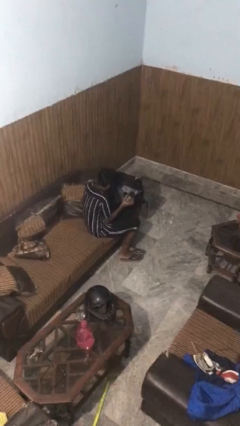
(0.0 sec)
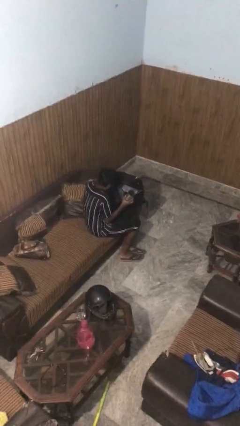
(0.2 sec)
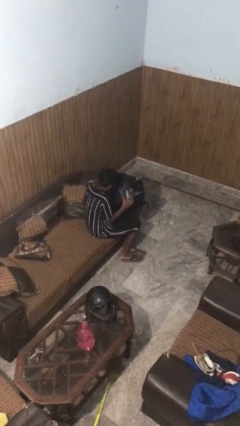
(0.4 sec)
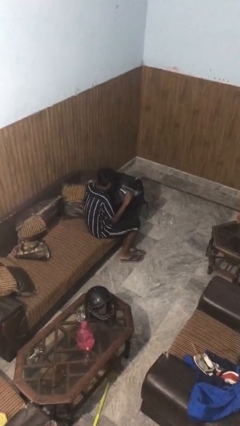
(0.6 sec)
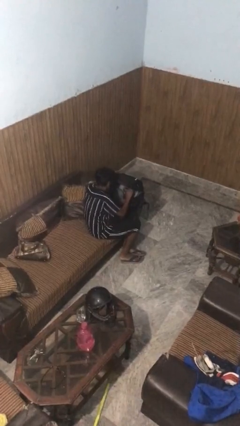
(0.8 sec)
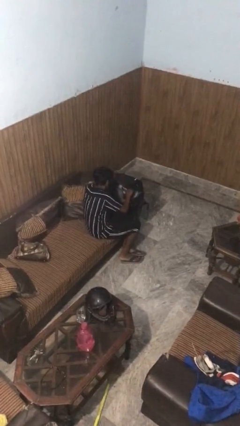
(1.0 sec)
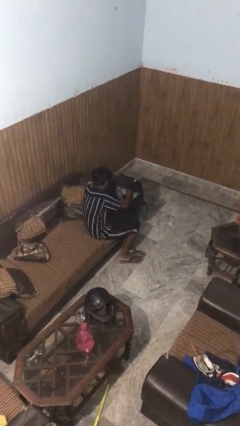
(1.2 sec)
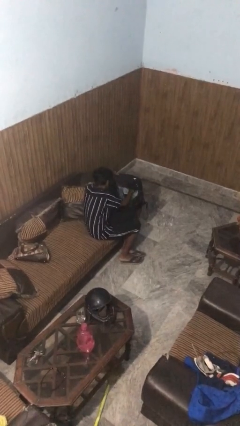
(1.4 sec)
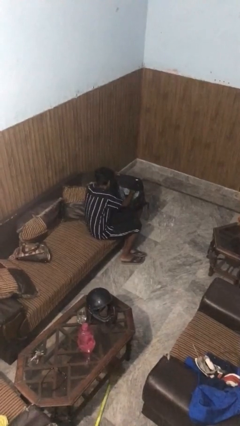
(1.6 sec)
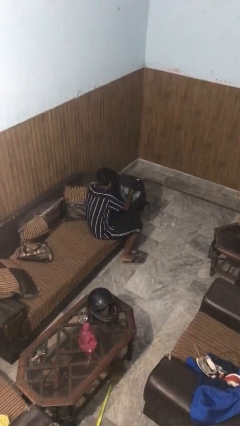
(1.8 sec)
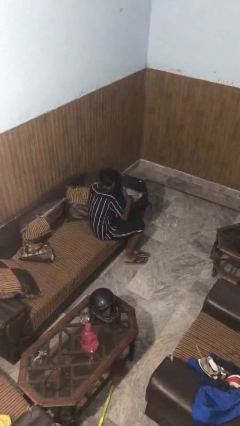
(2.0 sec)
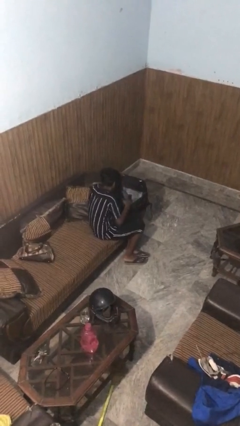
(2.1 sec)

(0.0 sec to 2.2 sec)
person puts object into backpack

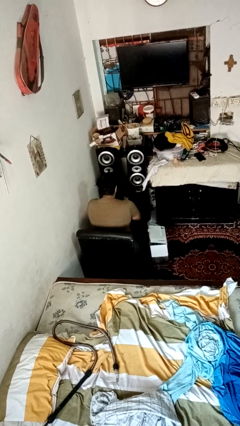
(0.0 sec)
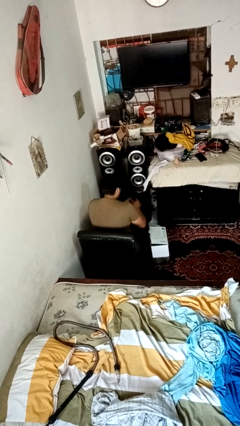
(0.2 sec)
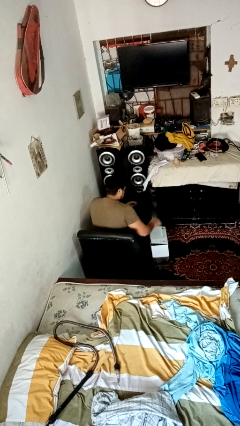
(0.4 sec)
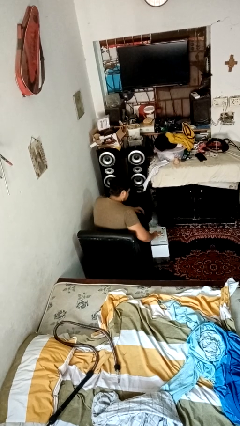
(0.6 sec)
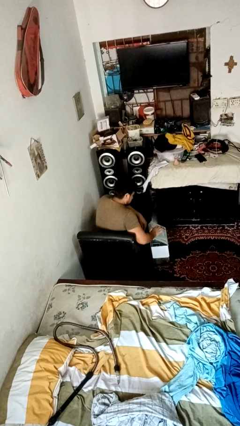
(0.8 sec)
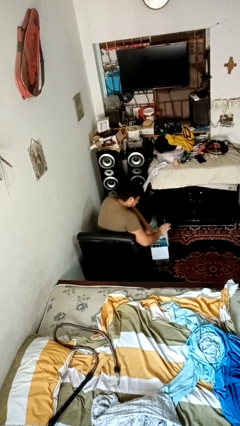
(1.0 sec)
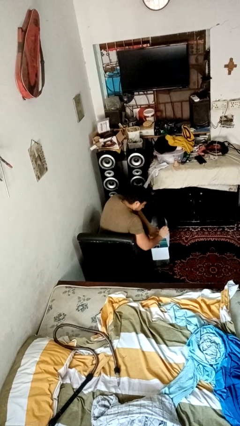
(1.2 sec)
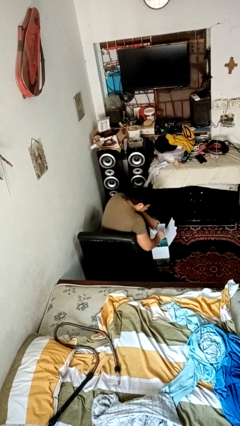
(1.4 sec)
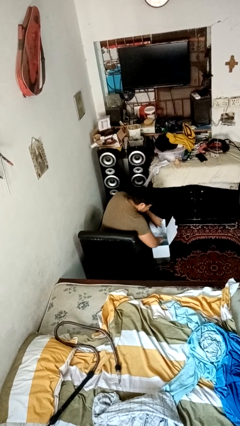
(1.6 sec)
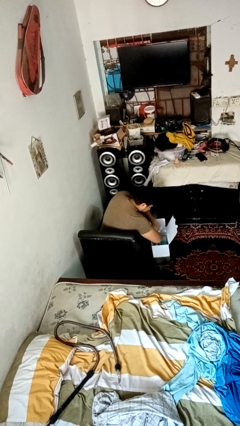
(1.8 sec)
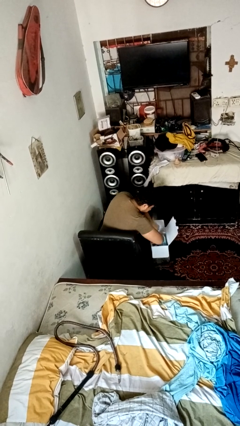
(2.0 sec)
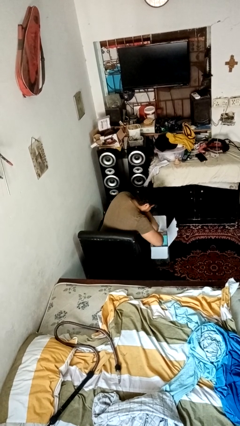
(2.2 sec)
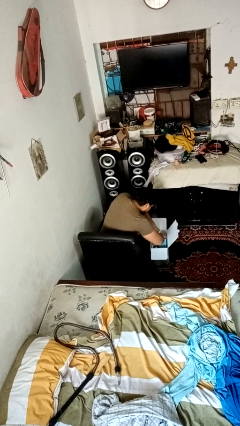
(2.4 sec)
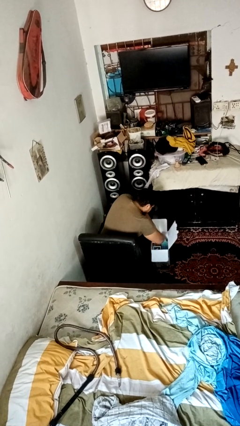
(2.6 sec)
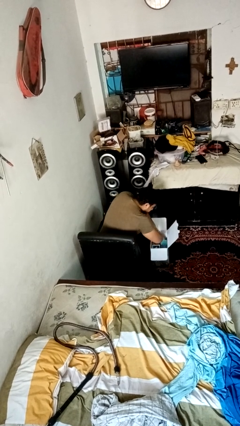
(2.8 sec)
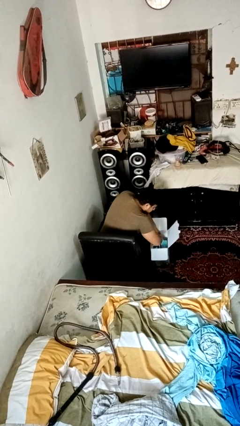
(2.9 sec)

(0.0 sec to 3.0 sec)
person searches in box

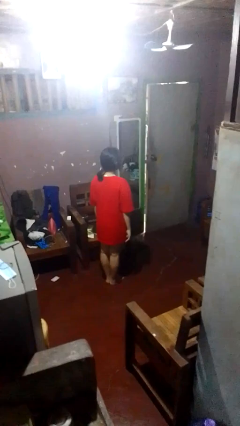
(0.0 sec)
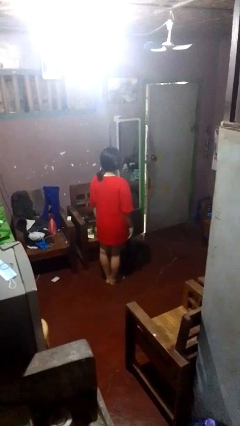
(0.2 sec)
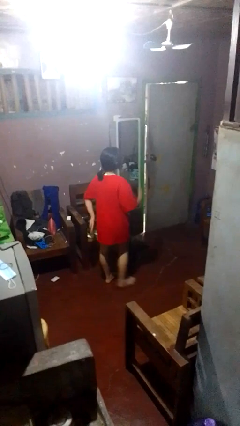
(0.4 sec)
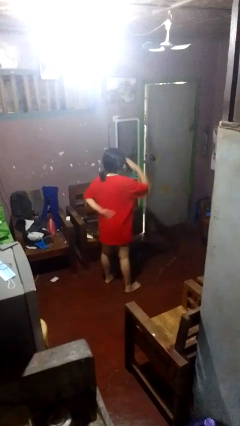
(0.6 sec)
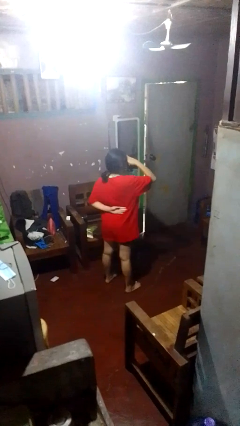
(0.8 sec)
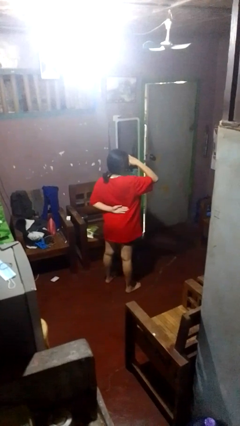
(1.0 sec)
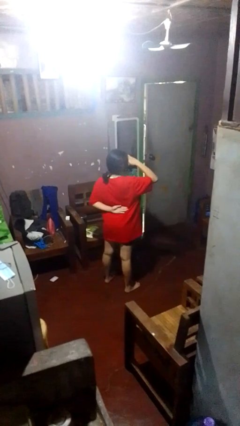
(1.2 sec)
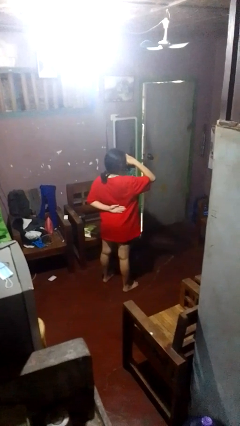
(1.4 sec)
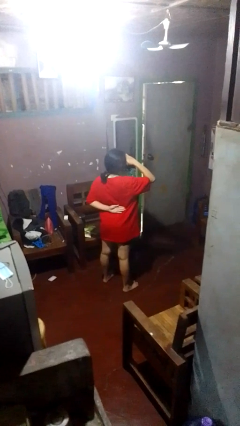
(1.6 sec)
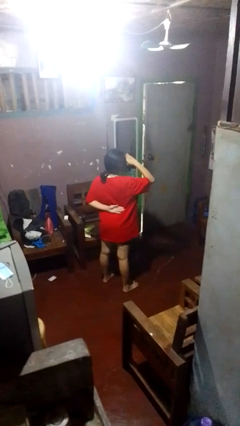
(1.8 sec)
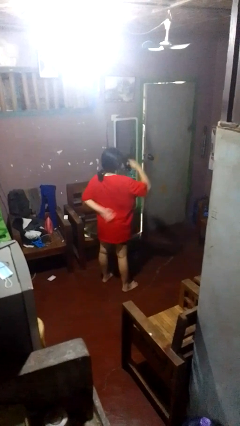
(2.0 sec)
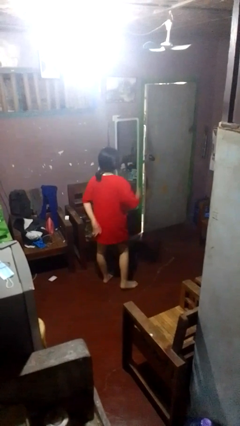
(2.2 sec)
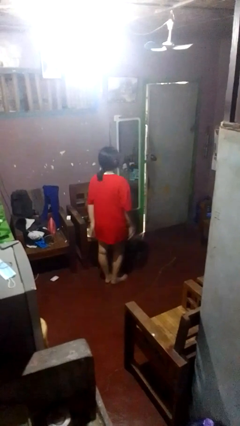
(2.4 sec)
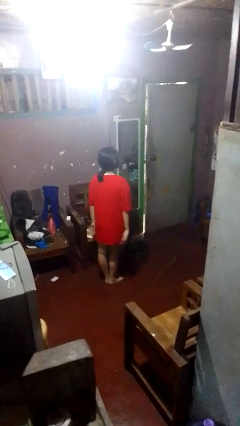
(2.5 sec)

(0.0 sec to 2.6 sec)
person salutes

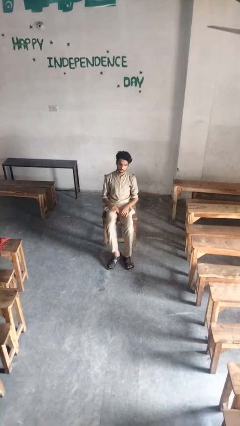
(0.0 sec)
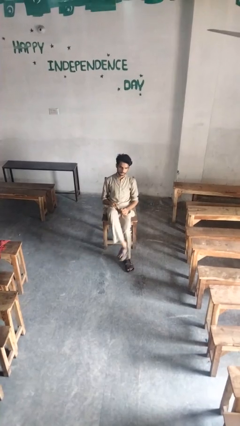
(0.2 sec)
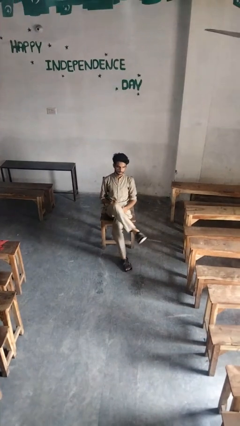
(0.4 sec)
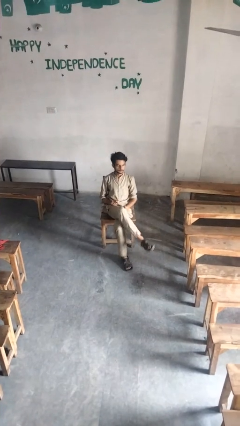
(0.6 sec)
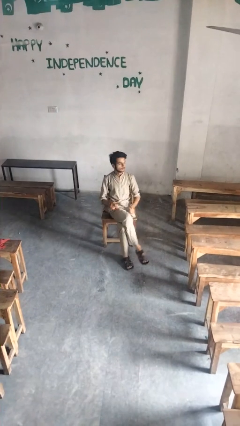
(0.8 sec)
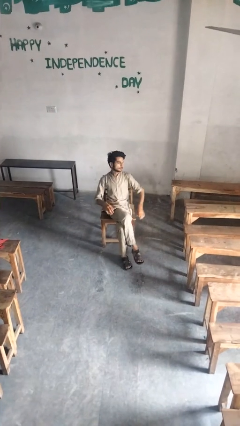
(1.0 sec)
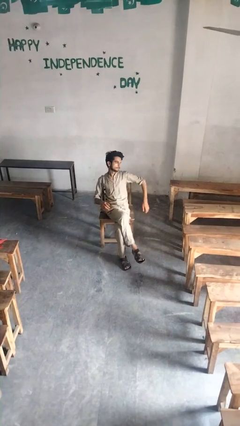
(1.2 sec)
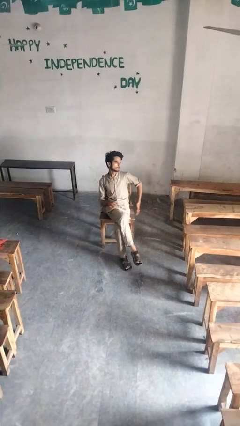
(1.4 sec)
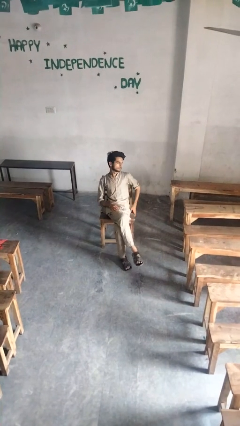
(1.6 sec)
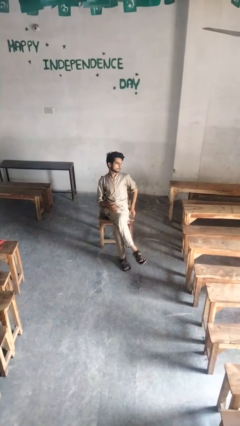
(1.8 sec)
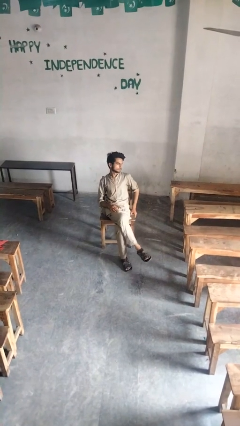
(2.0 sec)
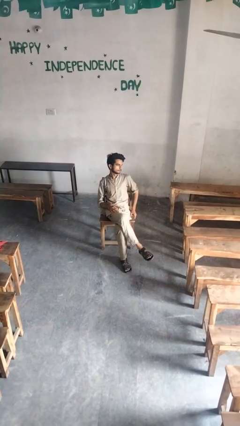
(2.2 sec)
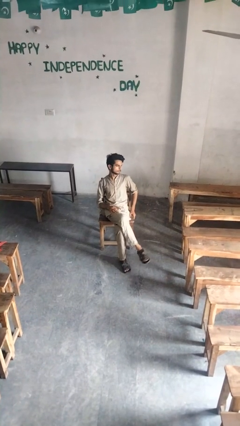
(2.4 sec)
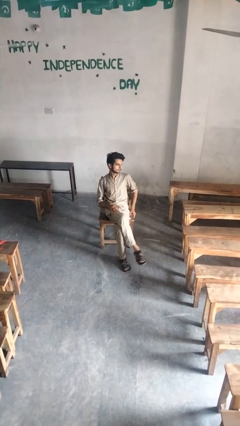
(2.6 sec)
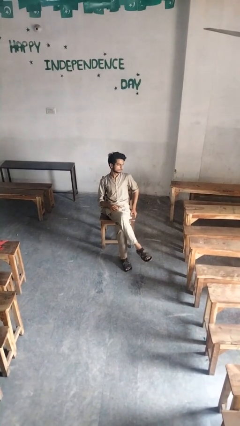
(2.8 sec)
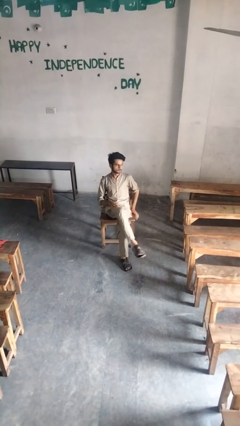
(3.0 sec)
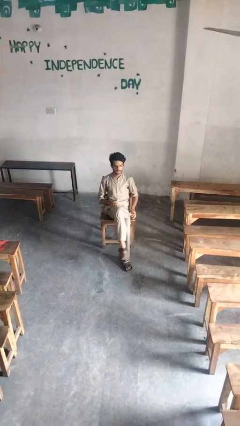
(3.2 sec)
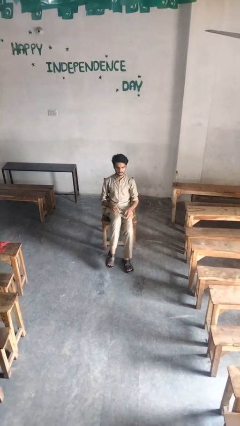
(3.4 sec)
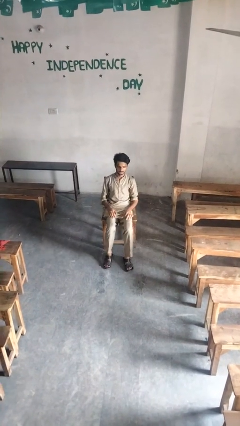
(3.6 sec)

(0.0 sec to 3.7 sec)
person crosses legs

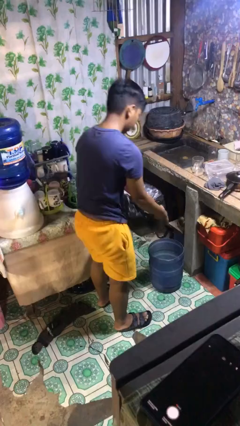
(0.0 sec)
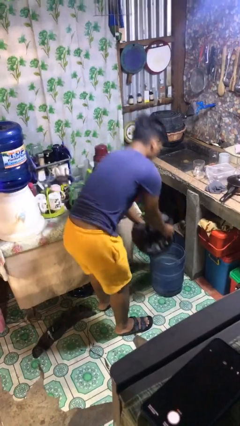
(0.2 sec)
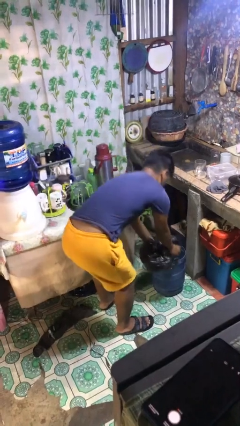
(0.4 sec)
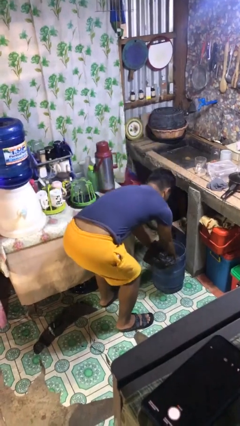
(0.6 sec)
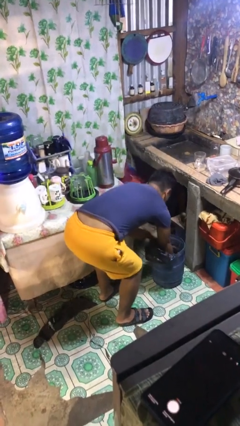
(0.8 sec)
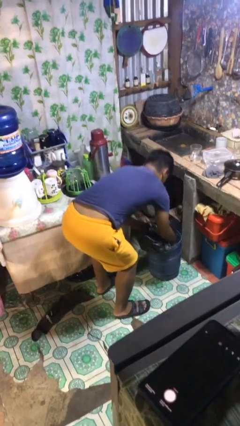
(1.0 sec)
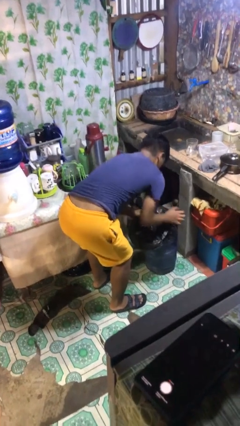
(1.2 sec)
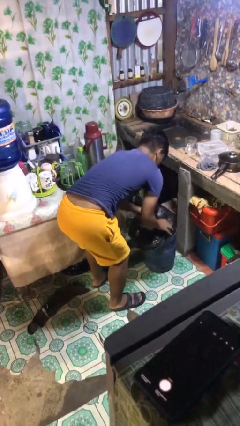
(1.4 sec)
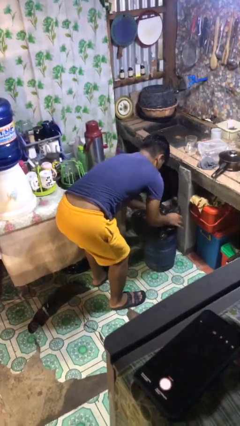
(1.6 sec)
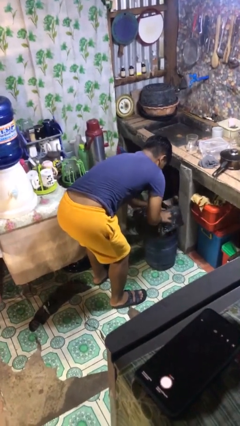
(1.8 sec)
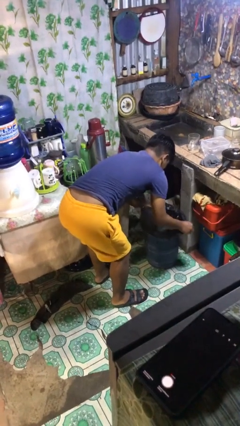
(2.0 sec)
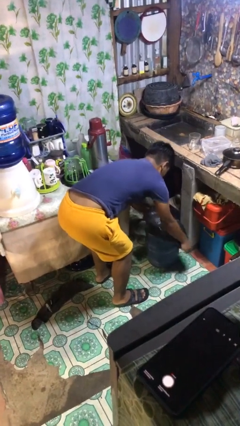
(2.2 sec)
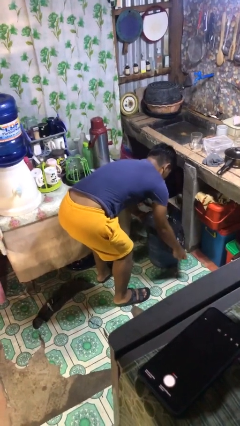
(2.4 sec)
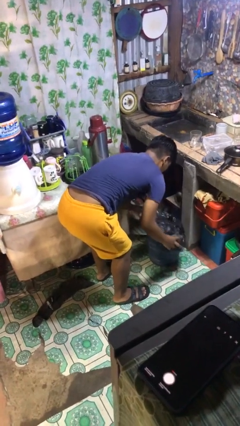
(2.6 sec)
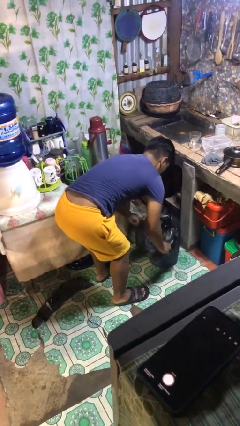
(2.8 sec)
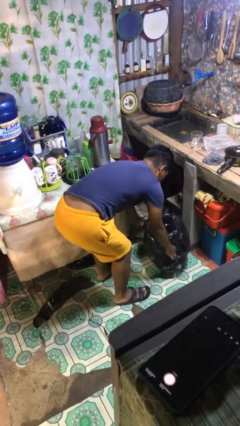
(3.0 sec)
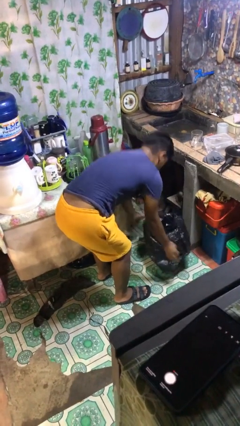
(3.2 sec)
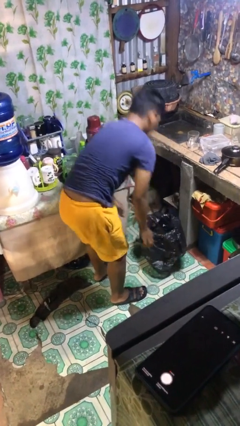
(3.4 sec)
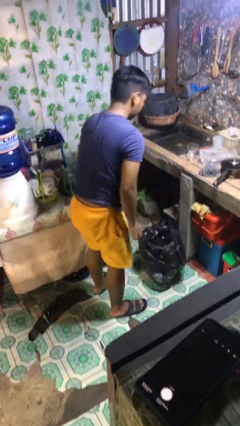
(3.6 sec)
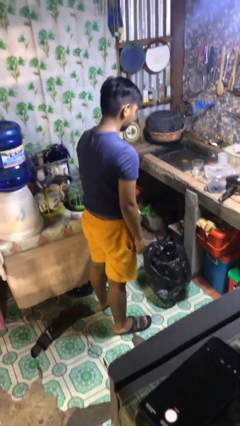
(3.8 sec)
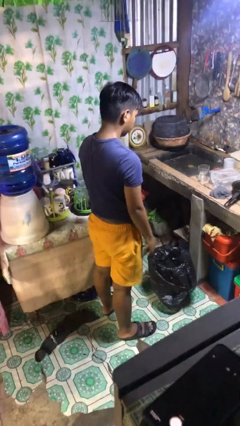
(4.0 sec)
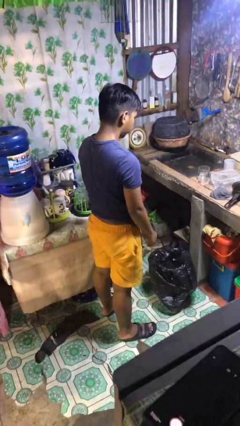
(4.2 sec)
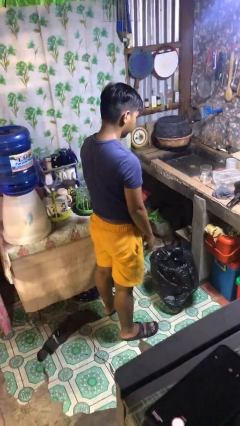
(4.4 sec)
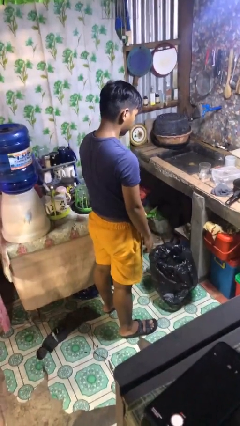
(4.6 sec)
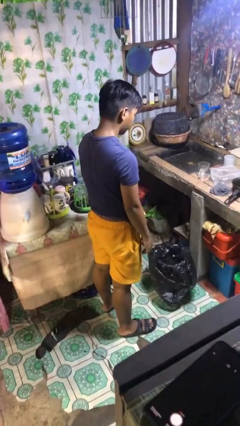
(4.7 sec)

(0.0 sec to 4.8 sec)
person inserts trashbag into trashcan

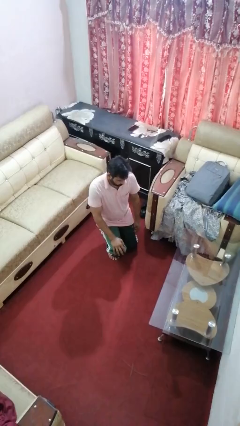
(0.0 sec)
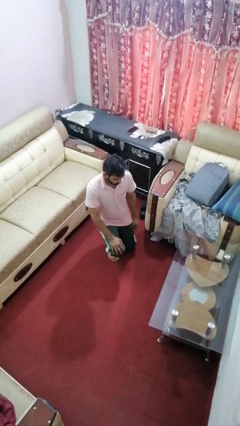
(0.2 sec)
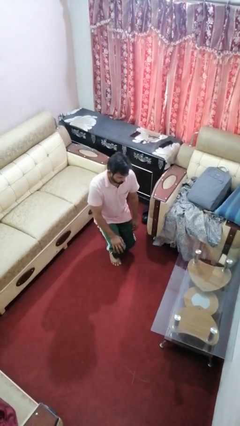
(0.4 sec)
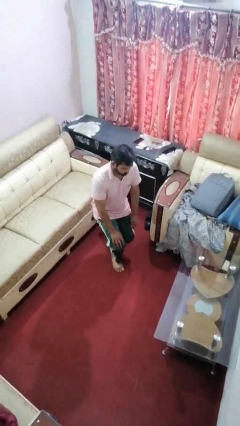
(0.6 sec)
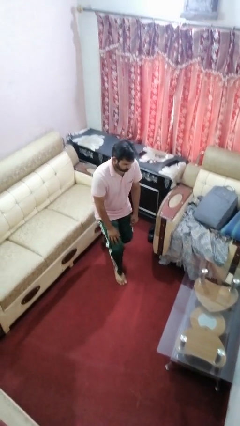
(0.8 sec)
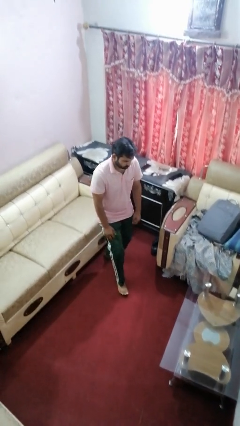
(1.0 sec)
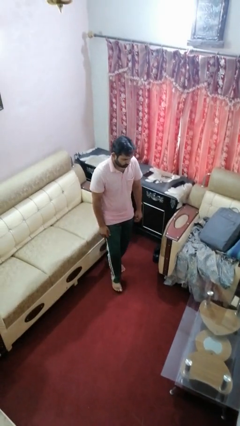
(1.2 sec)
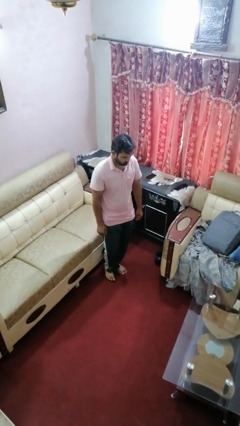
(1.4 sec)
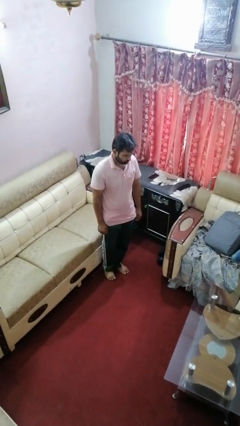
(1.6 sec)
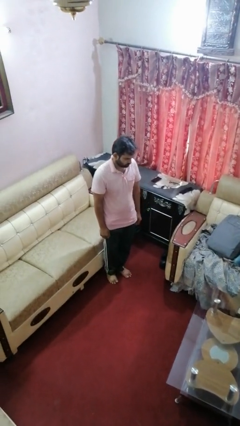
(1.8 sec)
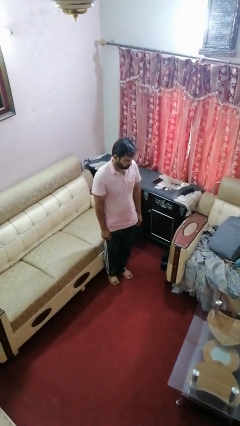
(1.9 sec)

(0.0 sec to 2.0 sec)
person stands up from floor
